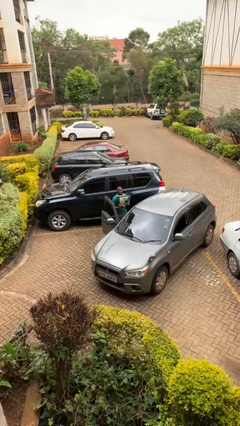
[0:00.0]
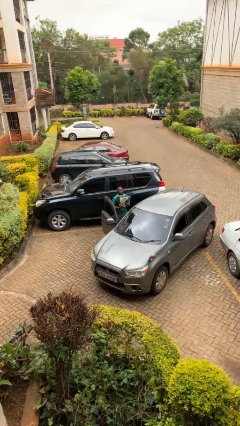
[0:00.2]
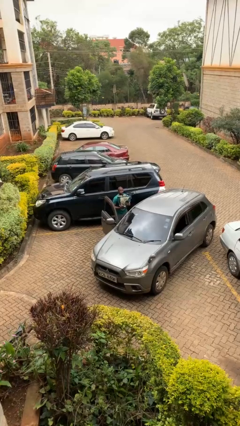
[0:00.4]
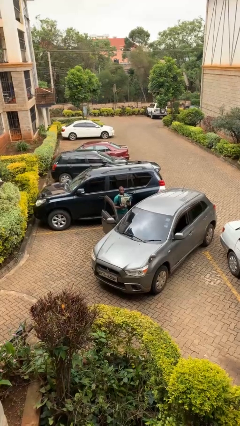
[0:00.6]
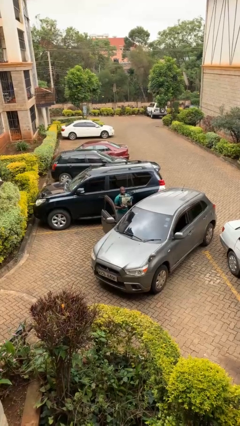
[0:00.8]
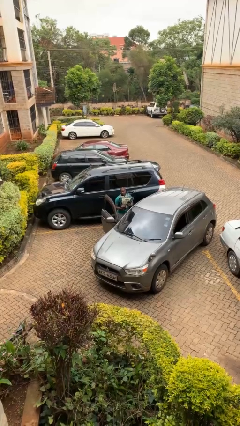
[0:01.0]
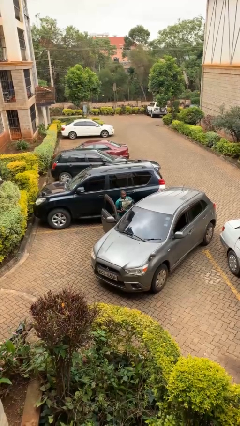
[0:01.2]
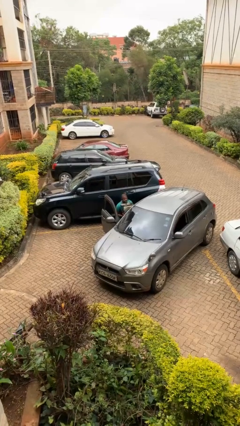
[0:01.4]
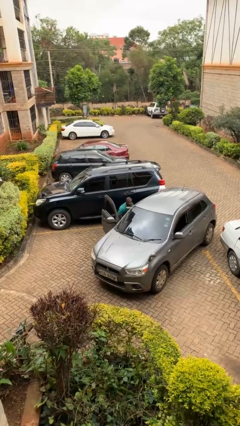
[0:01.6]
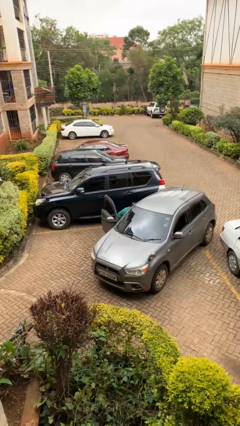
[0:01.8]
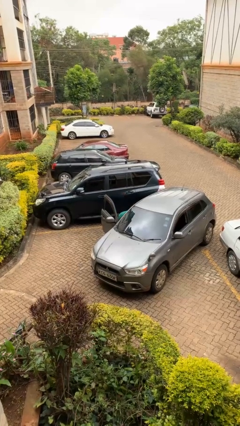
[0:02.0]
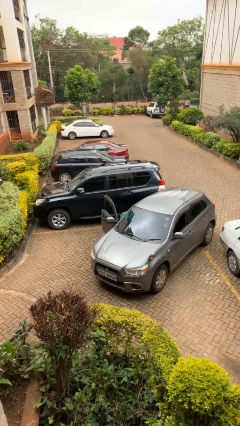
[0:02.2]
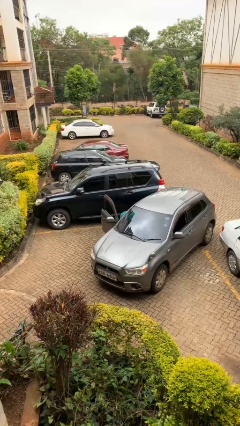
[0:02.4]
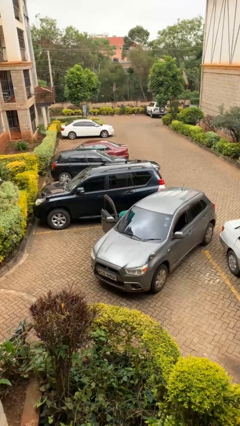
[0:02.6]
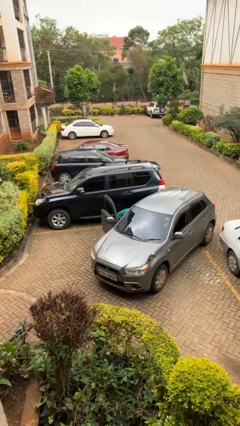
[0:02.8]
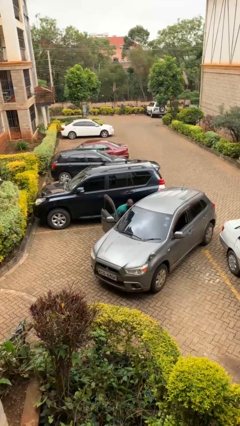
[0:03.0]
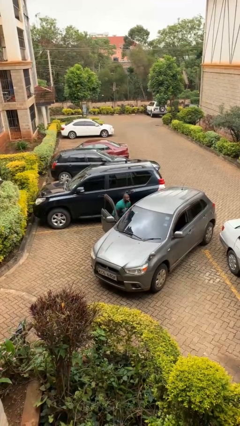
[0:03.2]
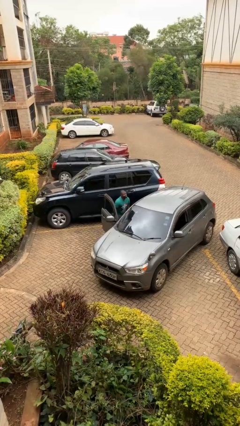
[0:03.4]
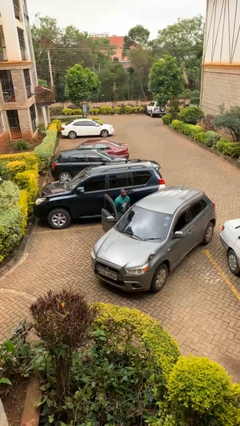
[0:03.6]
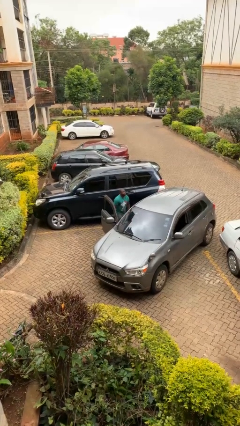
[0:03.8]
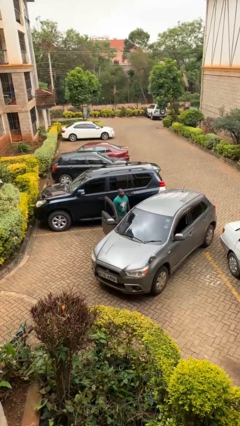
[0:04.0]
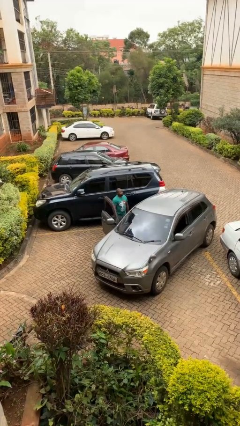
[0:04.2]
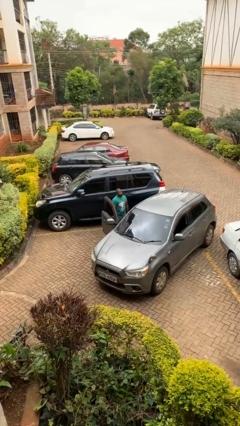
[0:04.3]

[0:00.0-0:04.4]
person loads car

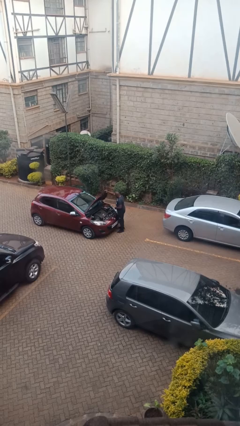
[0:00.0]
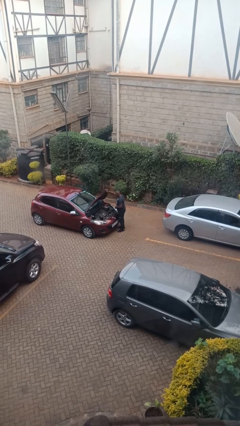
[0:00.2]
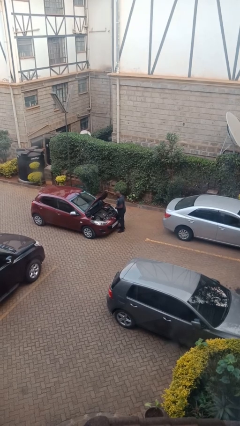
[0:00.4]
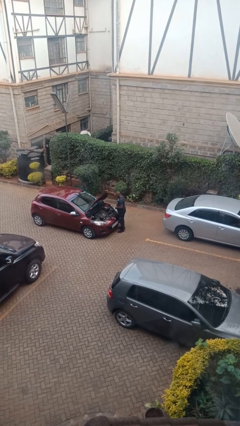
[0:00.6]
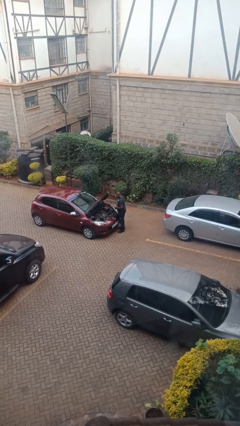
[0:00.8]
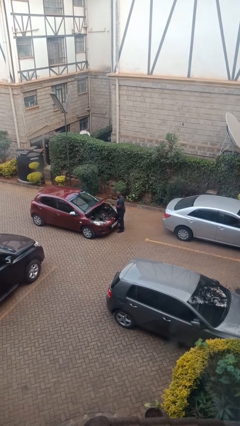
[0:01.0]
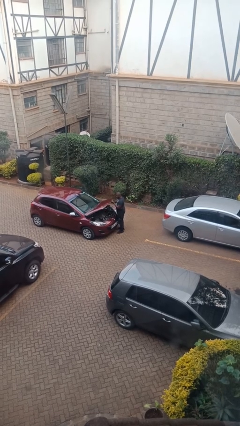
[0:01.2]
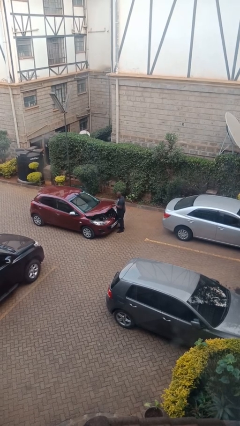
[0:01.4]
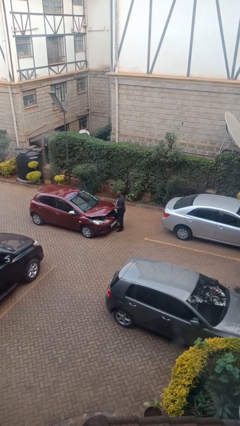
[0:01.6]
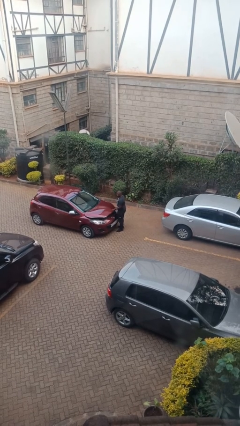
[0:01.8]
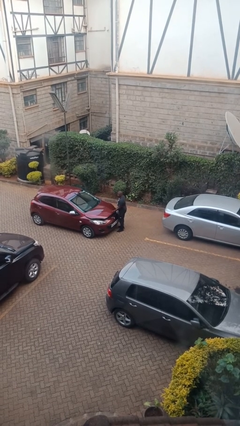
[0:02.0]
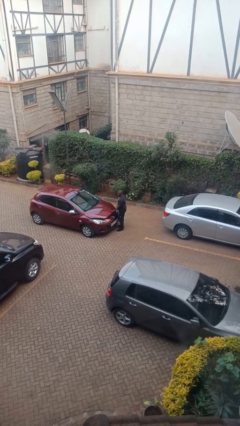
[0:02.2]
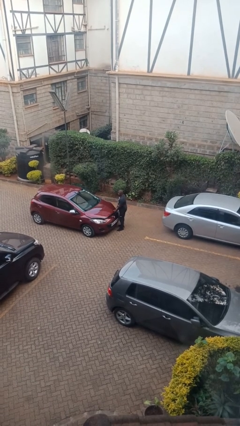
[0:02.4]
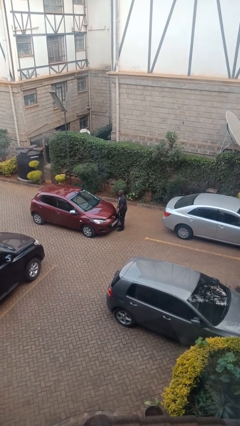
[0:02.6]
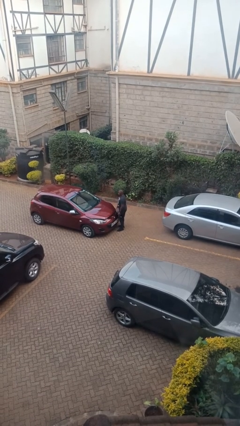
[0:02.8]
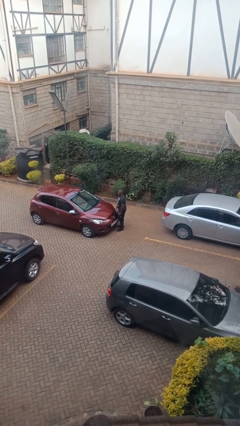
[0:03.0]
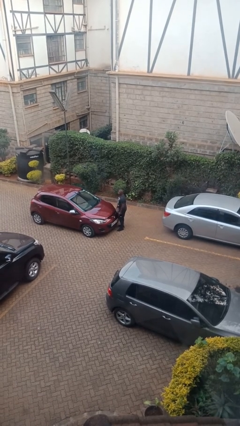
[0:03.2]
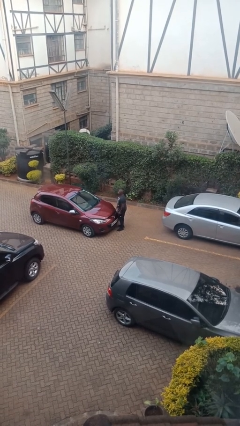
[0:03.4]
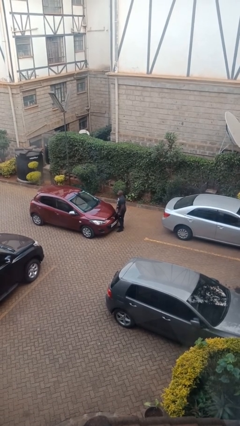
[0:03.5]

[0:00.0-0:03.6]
person closes car hood

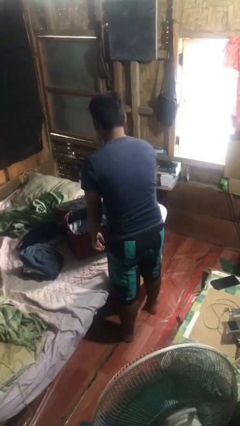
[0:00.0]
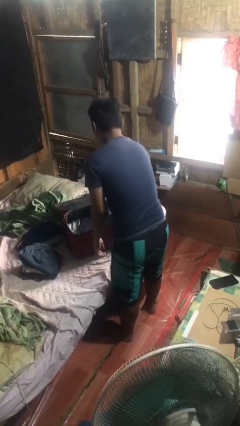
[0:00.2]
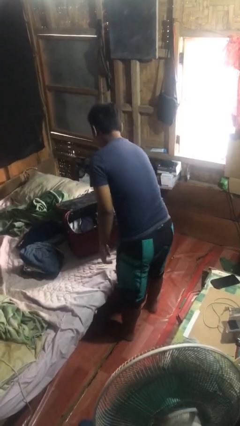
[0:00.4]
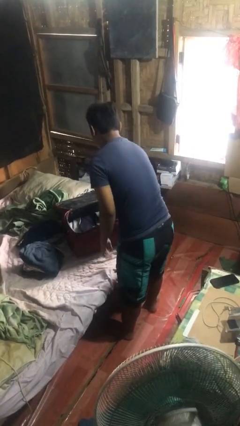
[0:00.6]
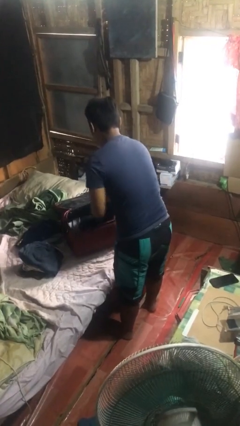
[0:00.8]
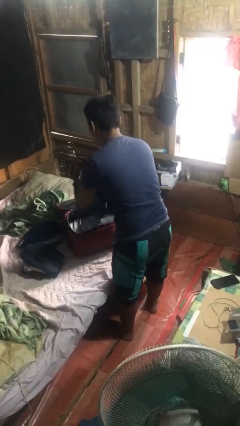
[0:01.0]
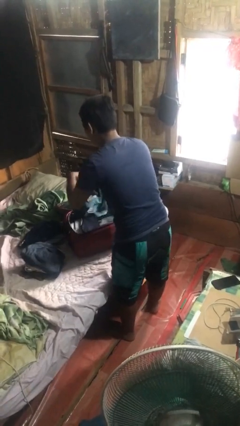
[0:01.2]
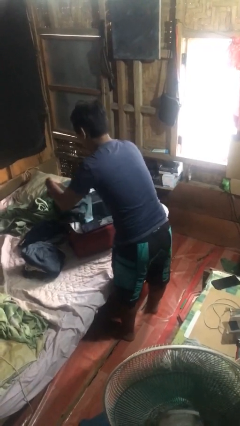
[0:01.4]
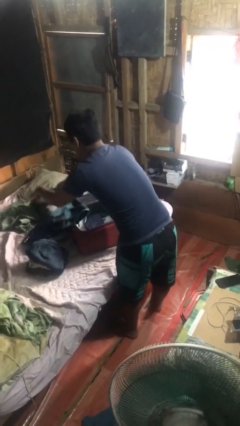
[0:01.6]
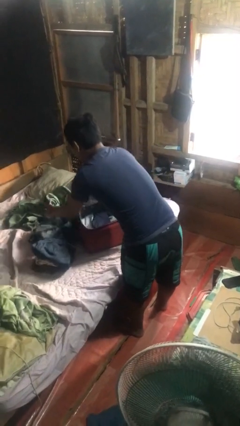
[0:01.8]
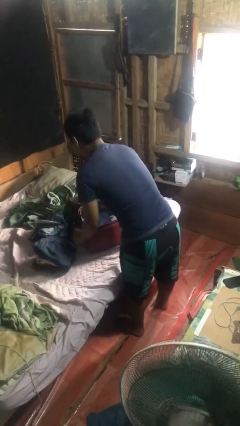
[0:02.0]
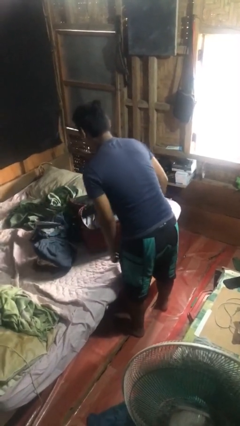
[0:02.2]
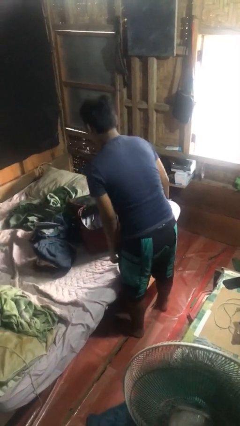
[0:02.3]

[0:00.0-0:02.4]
person unloads clothes from suitcase

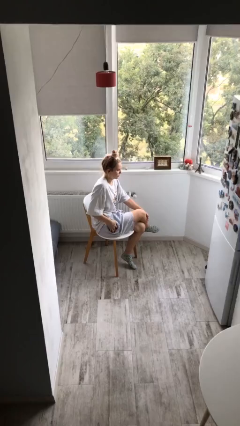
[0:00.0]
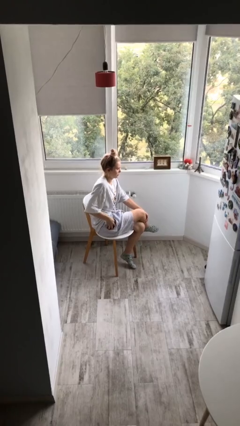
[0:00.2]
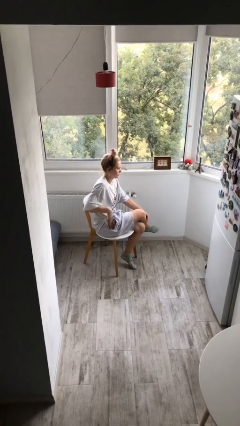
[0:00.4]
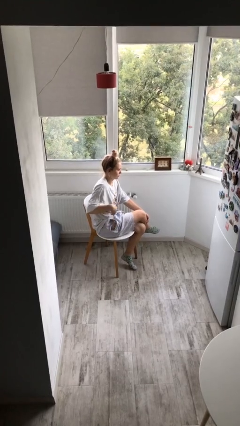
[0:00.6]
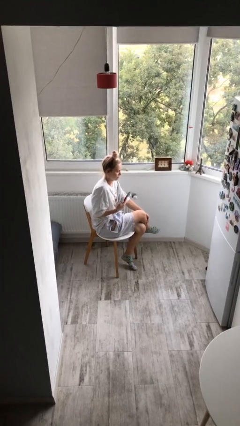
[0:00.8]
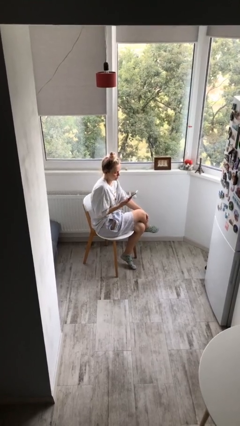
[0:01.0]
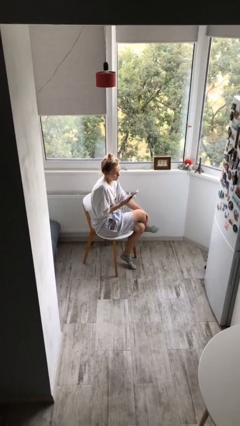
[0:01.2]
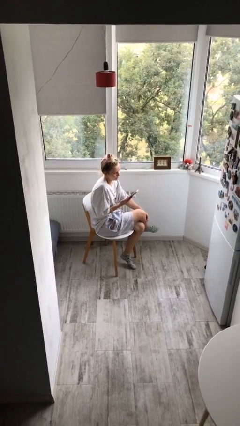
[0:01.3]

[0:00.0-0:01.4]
person takes phone from pocket

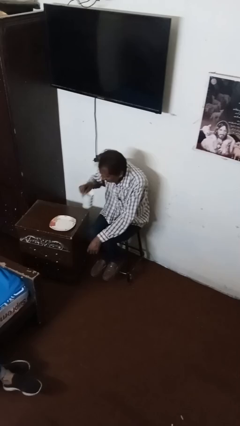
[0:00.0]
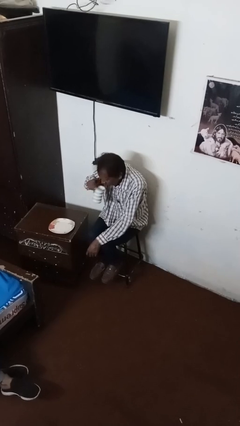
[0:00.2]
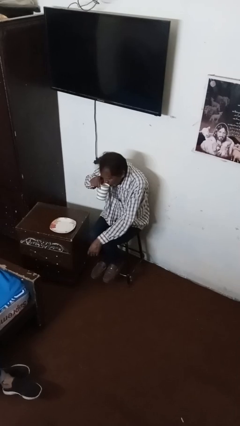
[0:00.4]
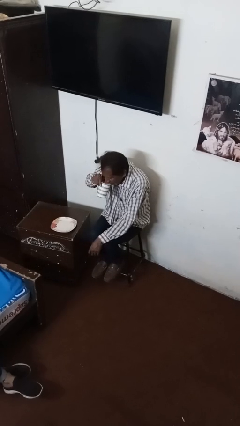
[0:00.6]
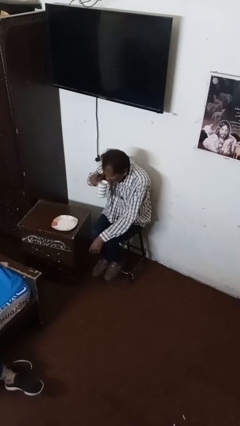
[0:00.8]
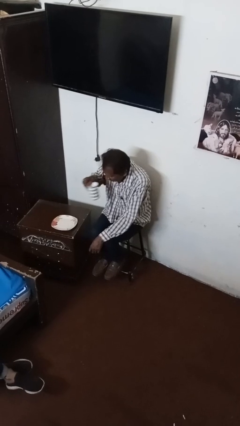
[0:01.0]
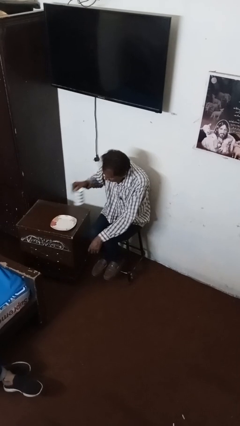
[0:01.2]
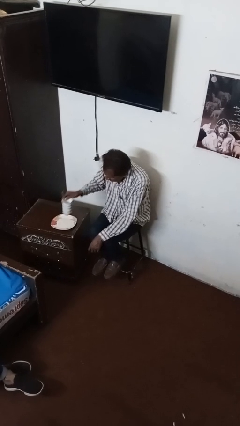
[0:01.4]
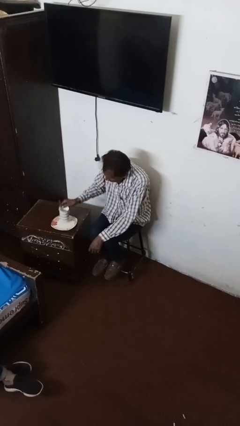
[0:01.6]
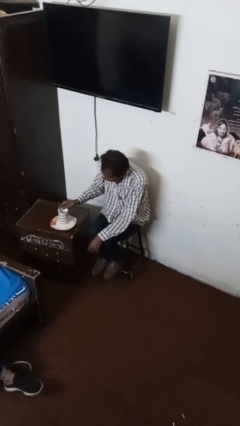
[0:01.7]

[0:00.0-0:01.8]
person drinks from mug

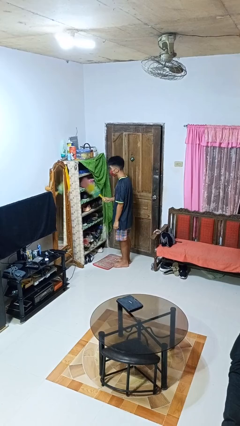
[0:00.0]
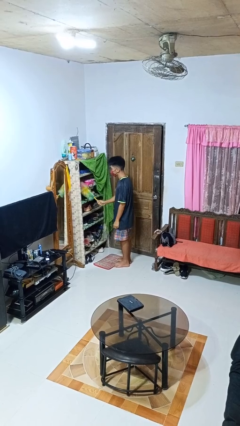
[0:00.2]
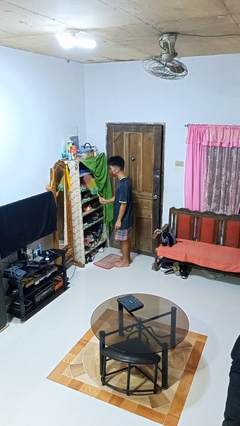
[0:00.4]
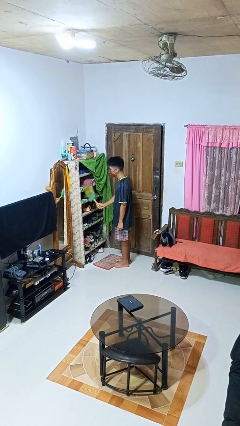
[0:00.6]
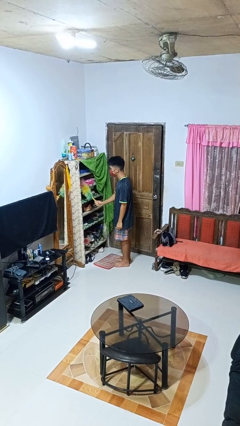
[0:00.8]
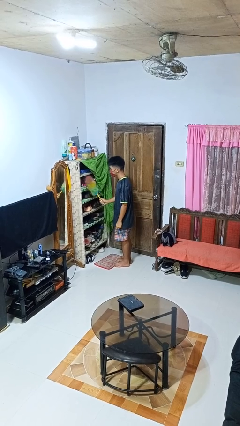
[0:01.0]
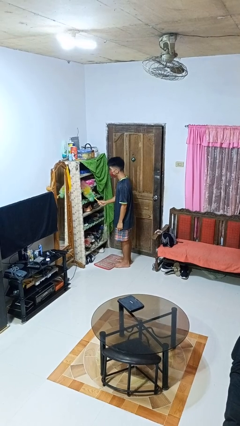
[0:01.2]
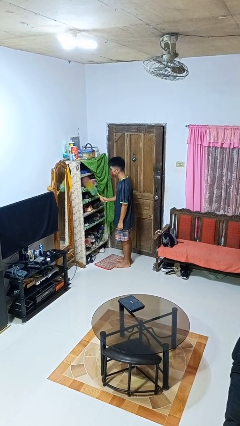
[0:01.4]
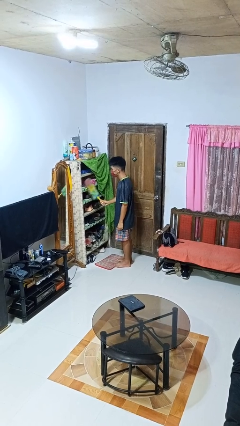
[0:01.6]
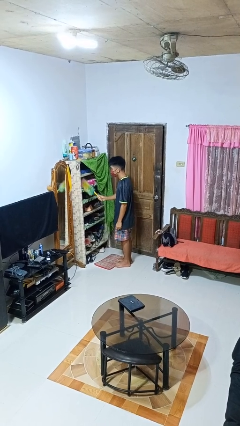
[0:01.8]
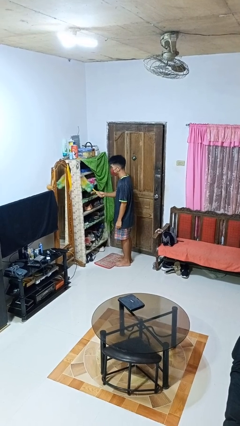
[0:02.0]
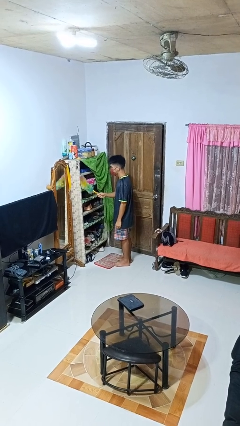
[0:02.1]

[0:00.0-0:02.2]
person dusts furniture

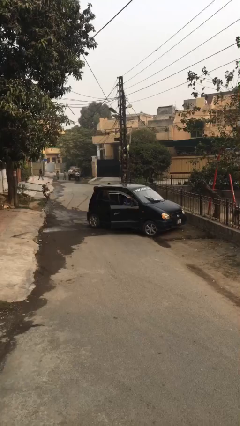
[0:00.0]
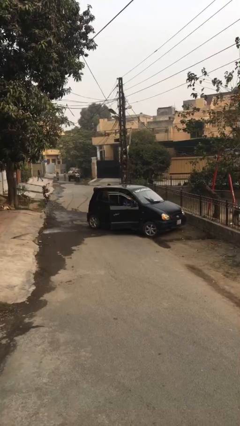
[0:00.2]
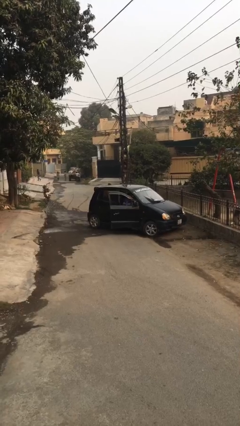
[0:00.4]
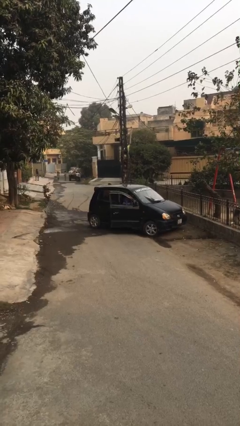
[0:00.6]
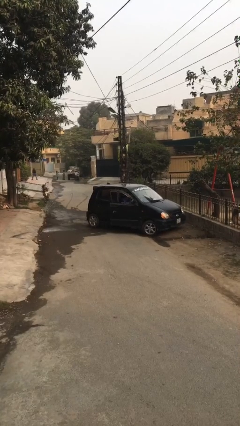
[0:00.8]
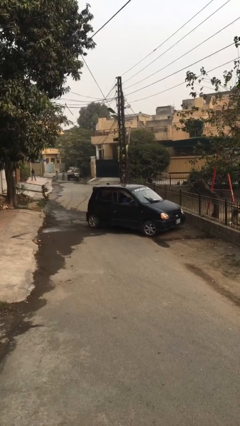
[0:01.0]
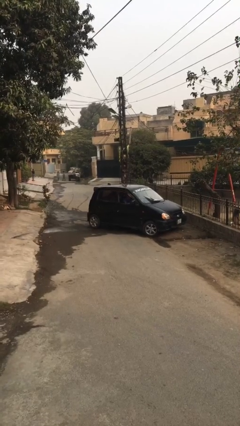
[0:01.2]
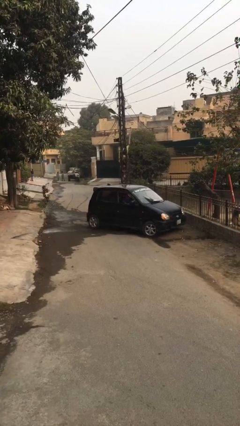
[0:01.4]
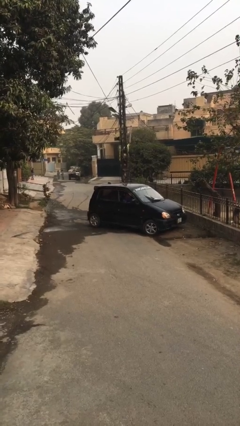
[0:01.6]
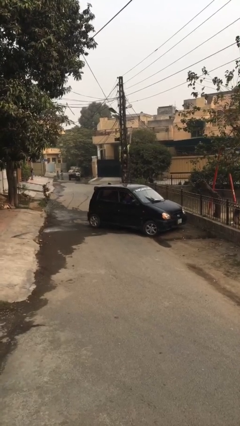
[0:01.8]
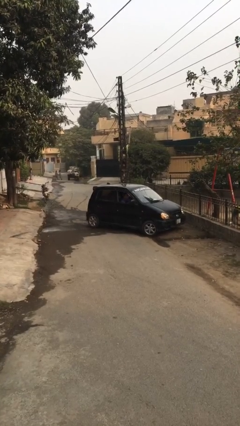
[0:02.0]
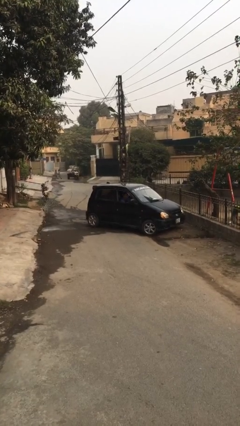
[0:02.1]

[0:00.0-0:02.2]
person closes car door
